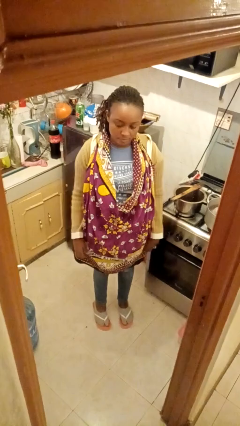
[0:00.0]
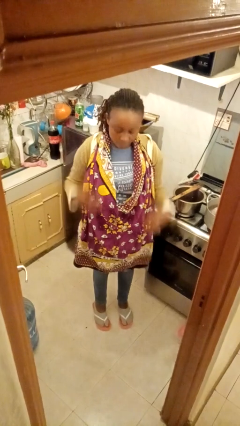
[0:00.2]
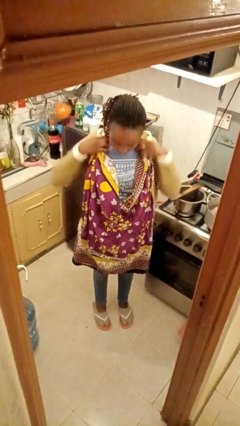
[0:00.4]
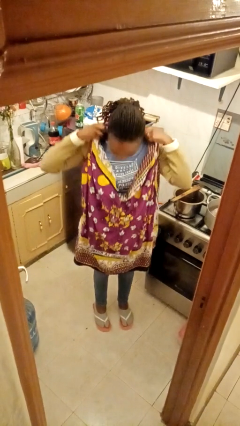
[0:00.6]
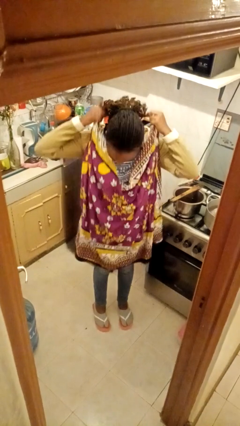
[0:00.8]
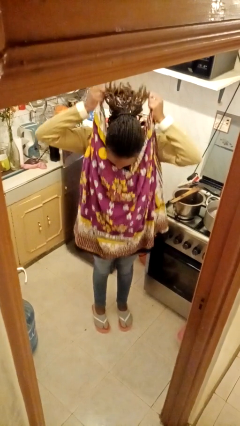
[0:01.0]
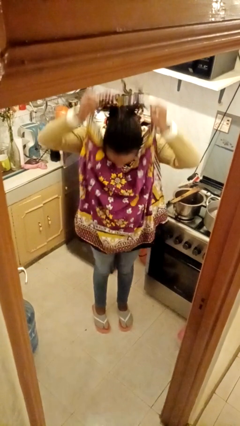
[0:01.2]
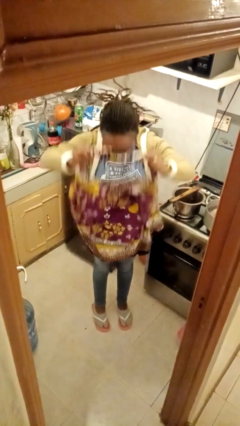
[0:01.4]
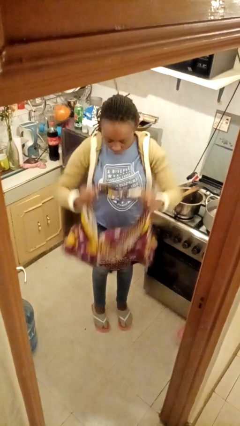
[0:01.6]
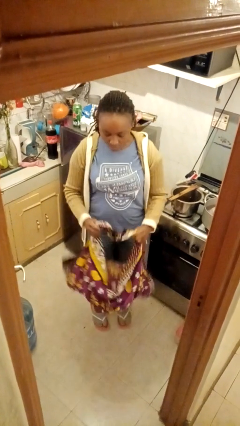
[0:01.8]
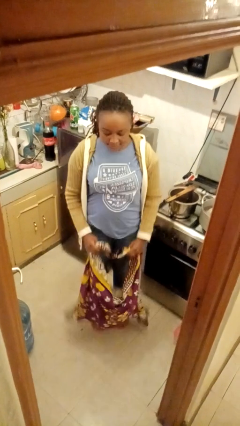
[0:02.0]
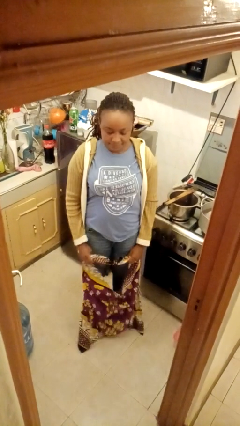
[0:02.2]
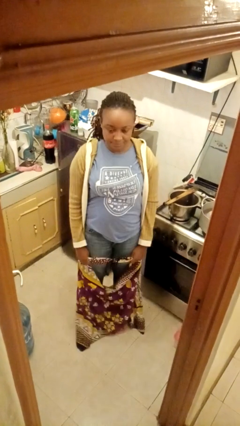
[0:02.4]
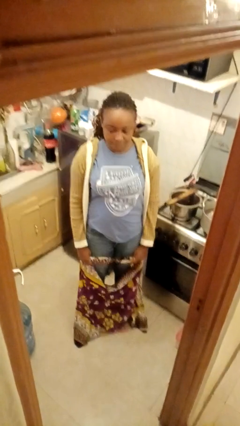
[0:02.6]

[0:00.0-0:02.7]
person takes off apron

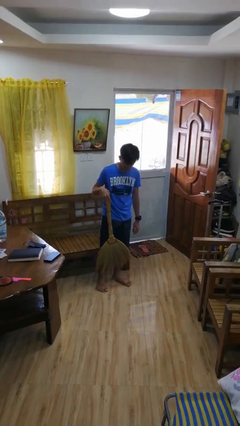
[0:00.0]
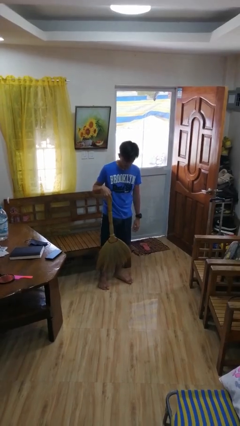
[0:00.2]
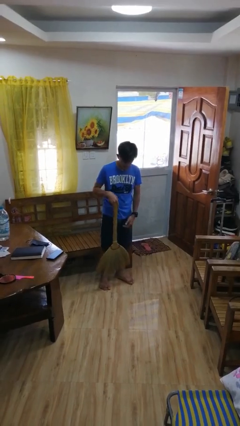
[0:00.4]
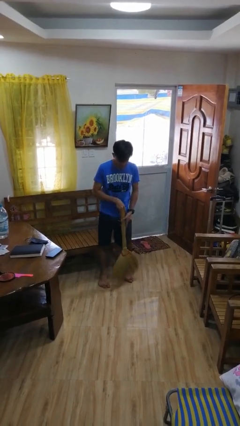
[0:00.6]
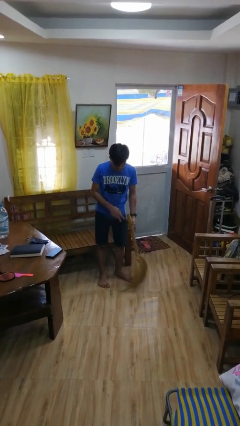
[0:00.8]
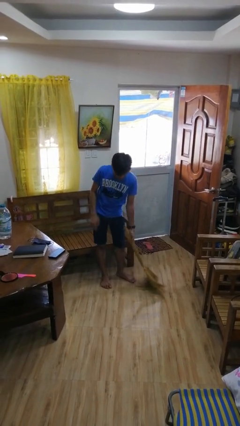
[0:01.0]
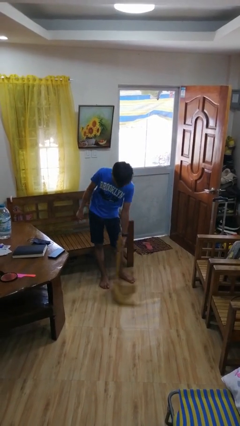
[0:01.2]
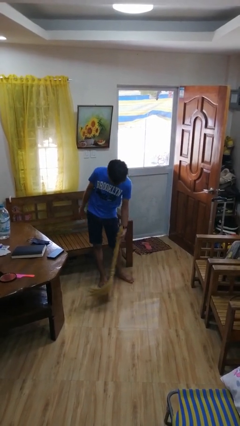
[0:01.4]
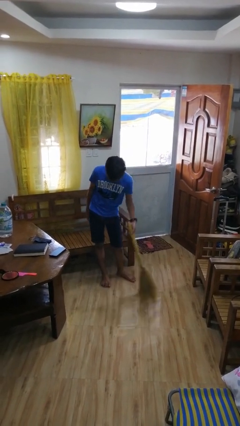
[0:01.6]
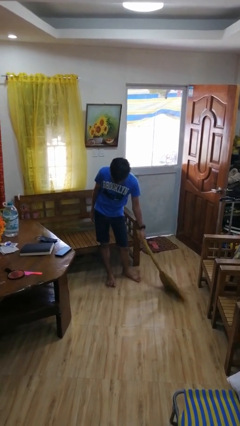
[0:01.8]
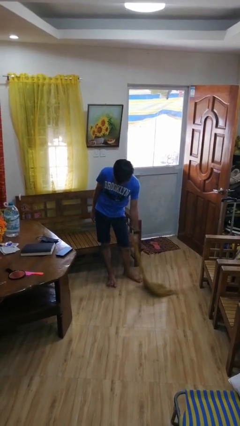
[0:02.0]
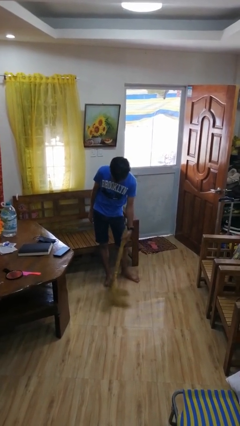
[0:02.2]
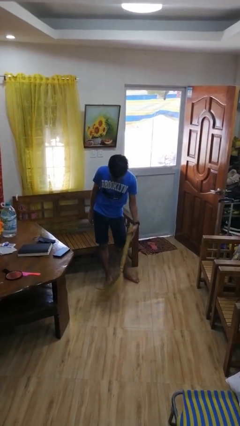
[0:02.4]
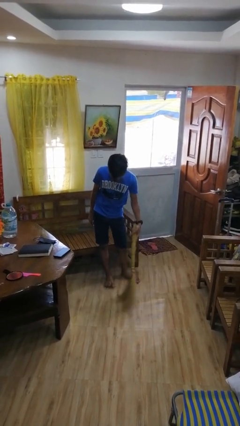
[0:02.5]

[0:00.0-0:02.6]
person sweeps floor

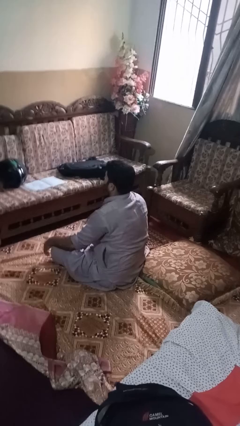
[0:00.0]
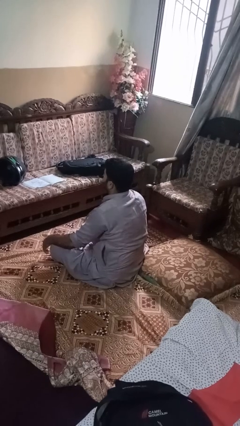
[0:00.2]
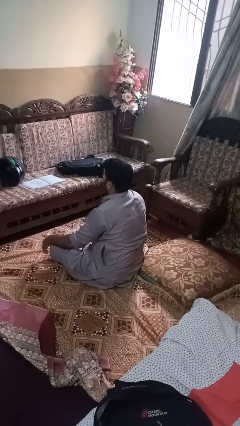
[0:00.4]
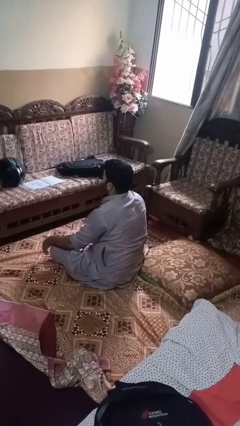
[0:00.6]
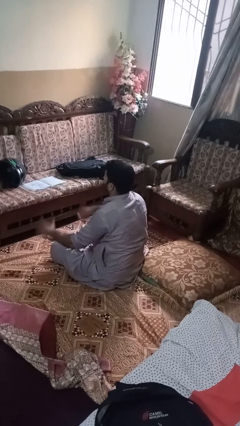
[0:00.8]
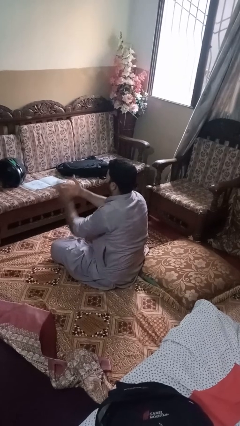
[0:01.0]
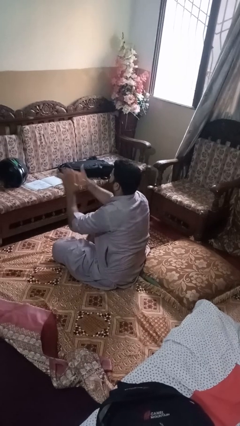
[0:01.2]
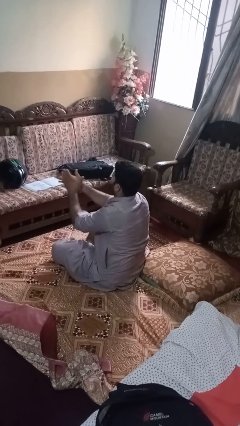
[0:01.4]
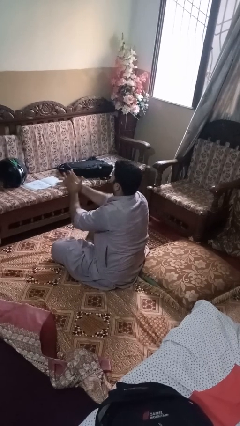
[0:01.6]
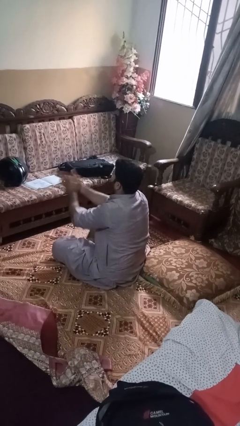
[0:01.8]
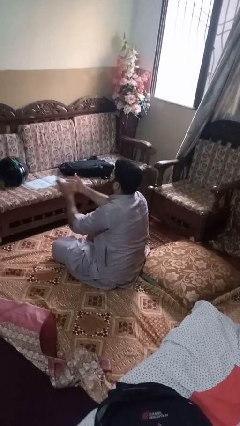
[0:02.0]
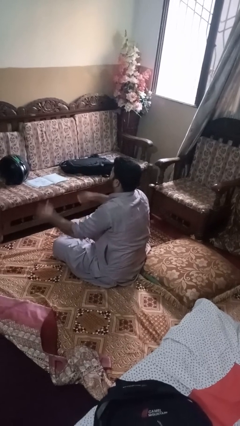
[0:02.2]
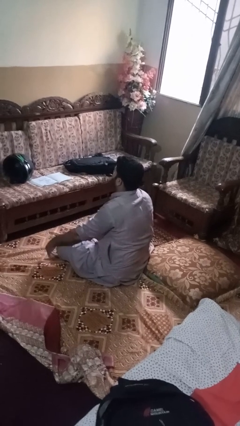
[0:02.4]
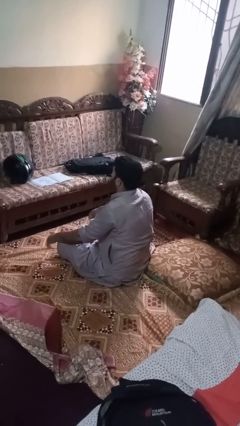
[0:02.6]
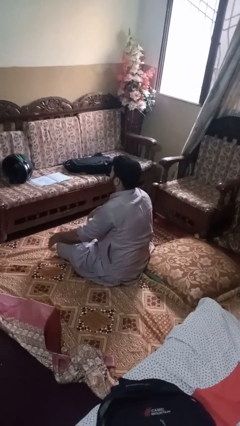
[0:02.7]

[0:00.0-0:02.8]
person claps hands

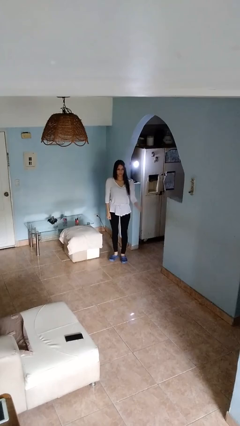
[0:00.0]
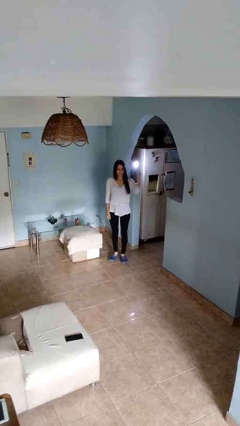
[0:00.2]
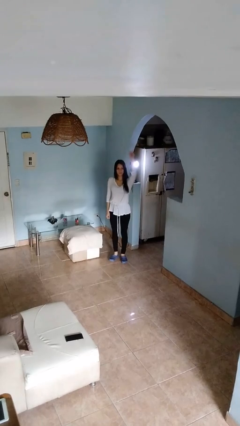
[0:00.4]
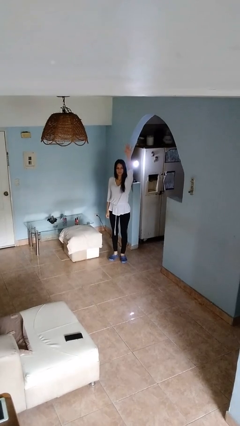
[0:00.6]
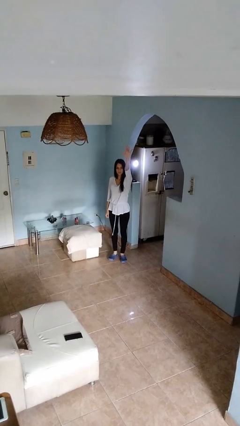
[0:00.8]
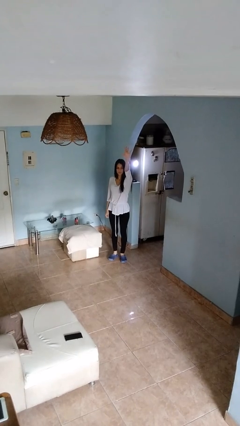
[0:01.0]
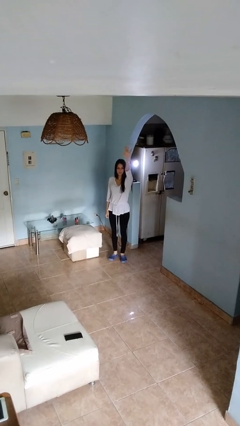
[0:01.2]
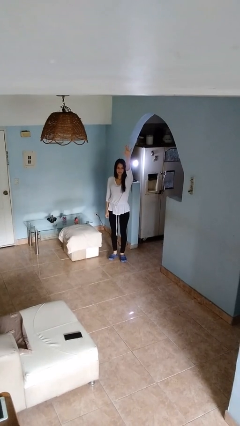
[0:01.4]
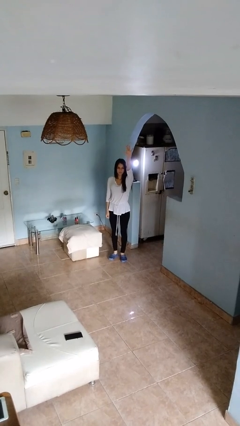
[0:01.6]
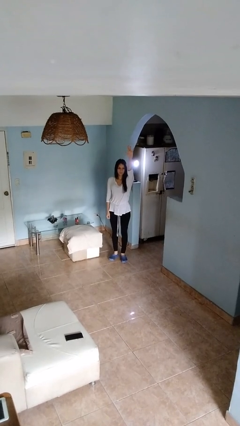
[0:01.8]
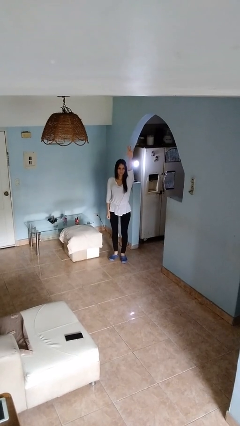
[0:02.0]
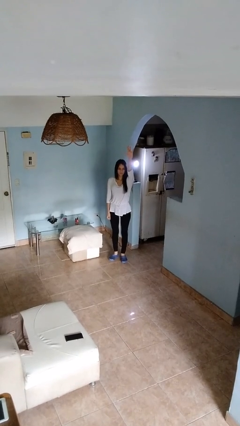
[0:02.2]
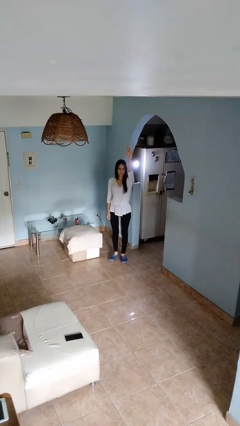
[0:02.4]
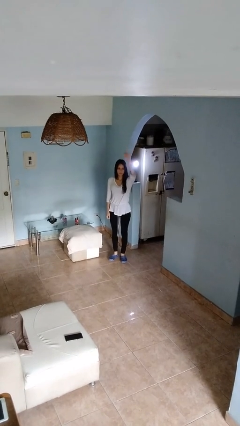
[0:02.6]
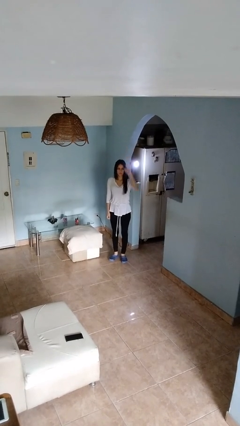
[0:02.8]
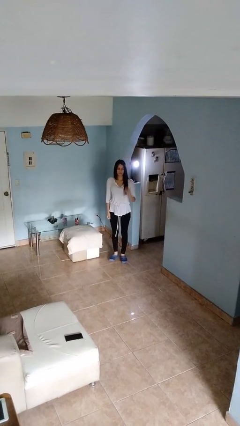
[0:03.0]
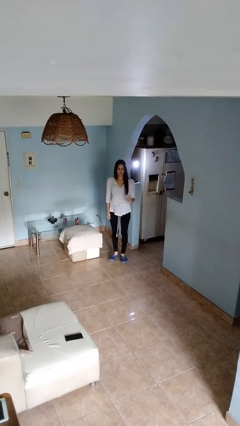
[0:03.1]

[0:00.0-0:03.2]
person gestures number five

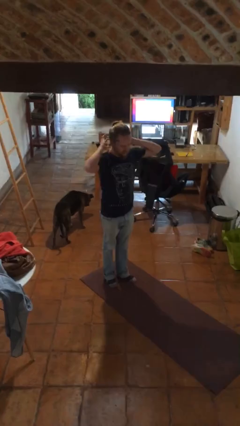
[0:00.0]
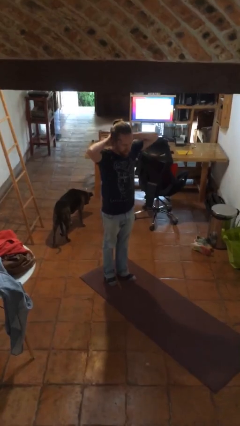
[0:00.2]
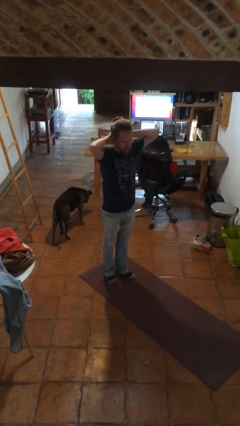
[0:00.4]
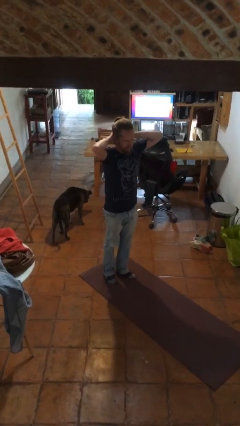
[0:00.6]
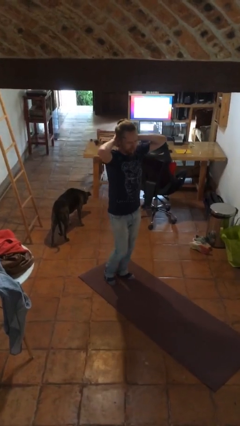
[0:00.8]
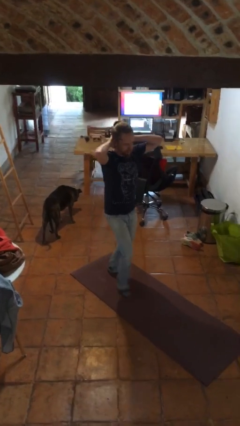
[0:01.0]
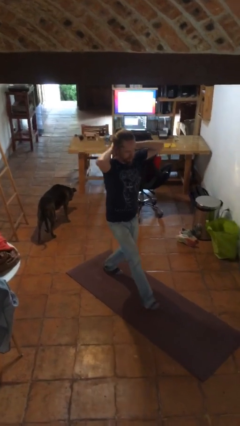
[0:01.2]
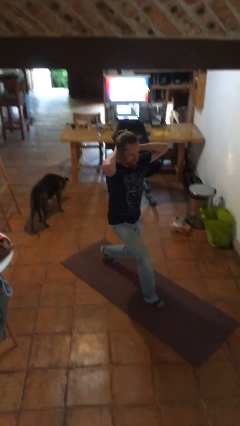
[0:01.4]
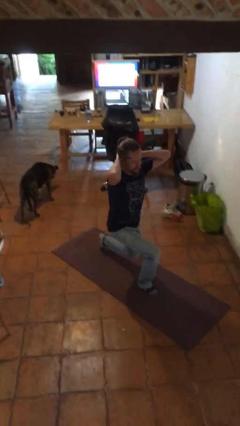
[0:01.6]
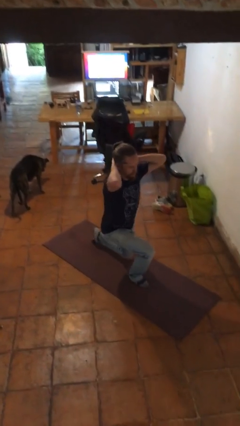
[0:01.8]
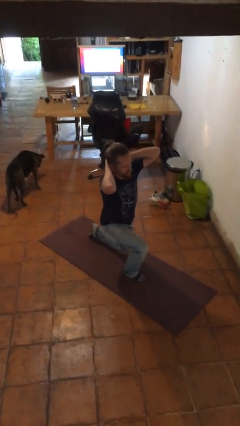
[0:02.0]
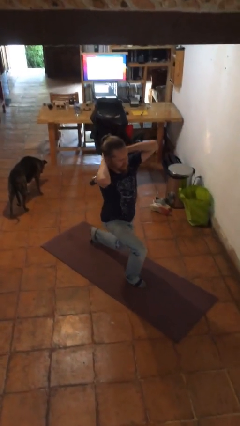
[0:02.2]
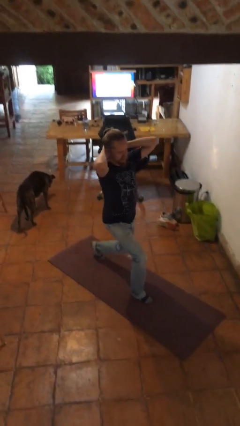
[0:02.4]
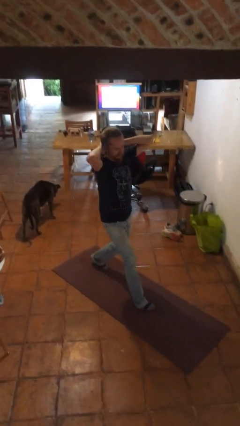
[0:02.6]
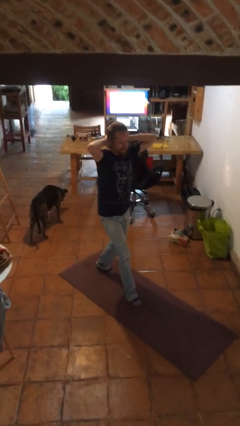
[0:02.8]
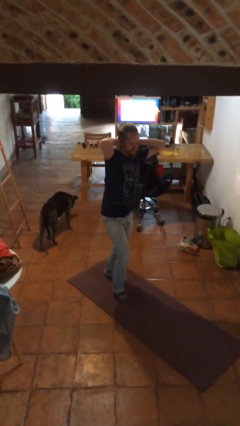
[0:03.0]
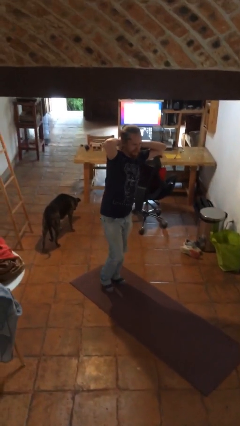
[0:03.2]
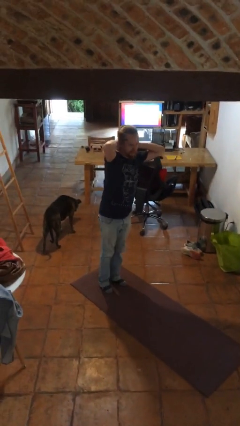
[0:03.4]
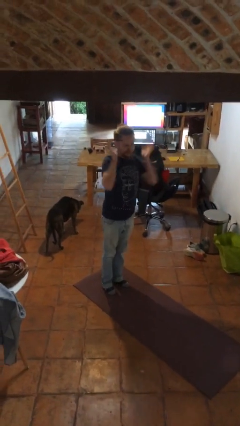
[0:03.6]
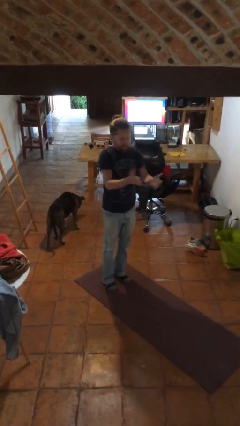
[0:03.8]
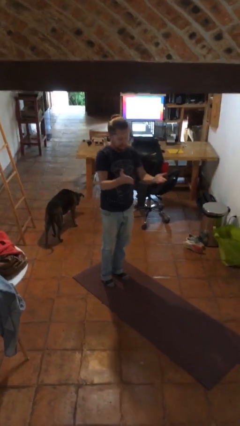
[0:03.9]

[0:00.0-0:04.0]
person exercises with lunges

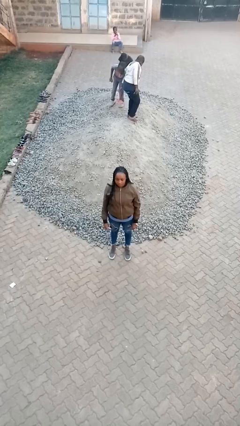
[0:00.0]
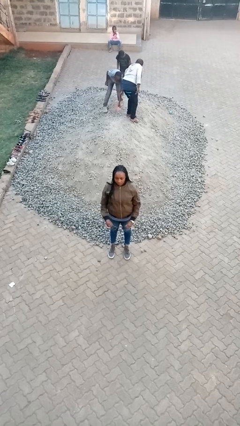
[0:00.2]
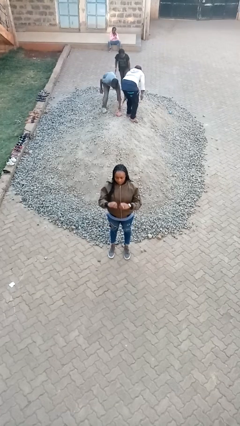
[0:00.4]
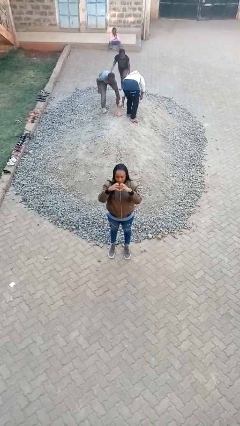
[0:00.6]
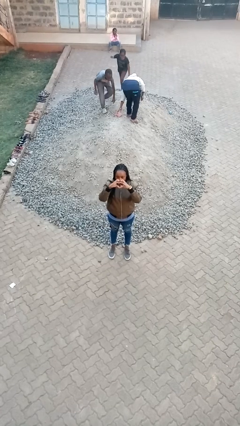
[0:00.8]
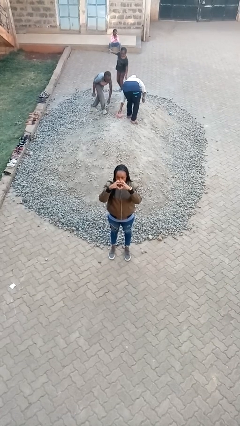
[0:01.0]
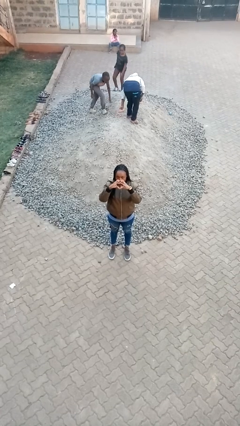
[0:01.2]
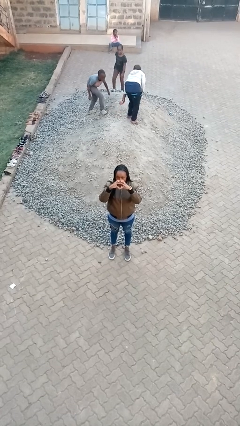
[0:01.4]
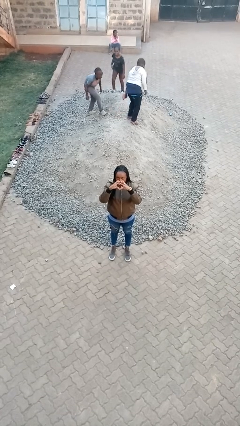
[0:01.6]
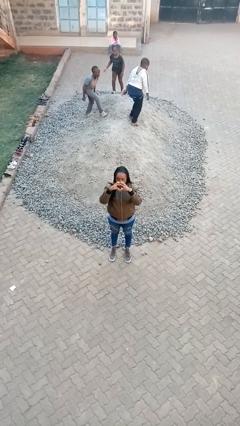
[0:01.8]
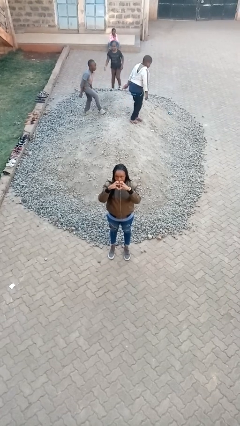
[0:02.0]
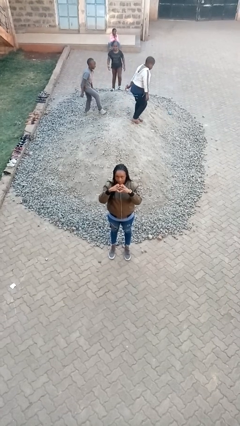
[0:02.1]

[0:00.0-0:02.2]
person gestures heart
